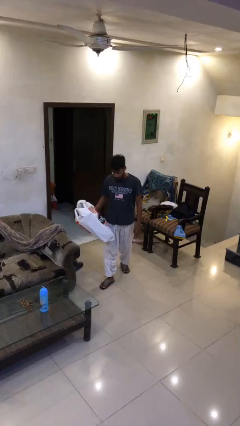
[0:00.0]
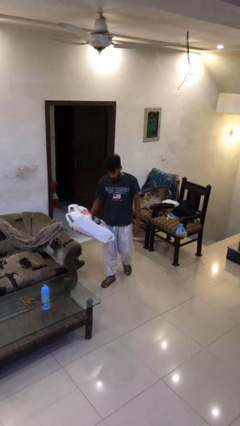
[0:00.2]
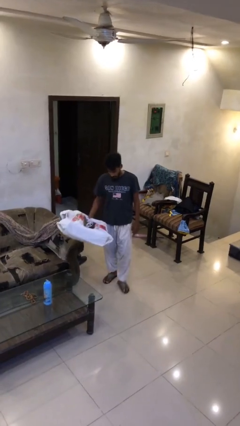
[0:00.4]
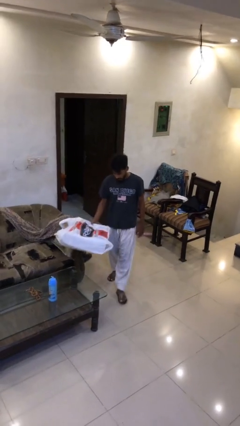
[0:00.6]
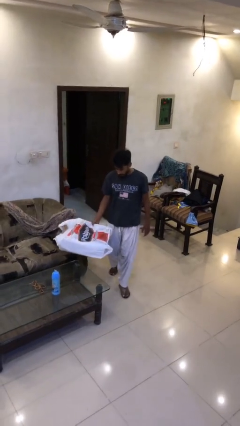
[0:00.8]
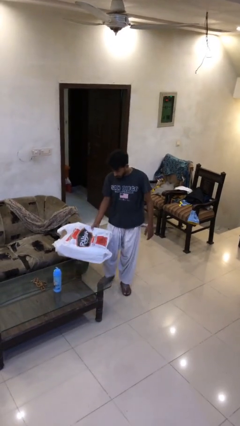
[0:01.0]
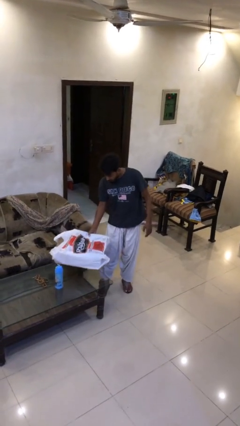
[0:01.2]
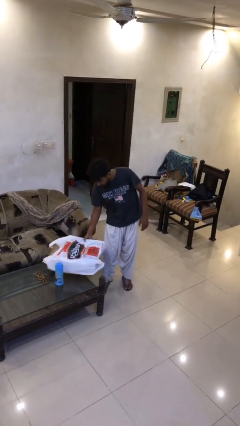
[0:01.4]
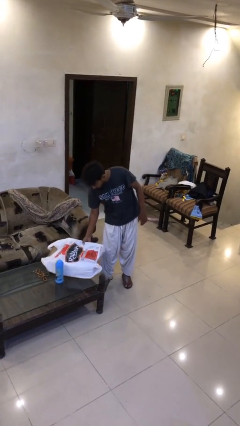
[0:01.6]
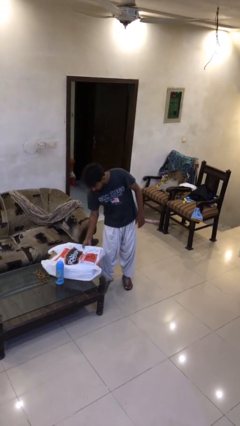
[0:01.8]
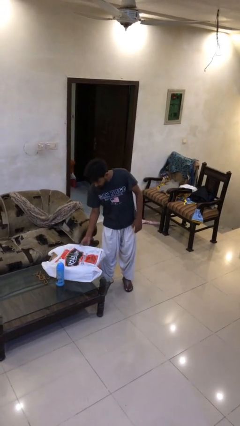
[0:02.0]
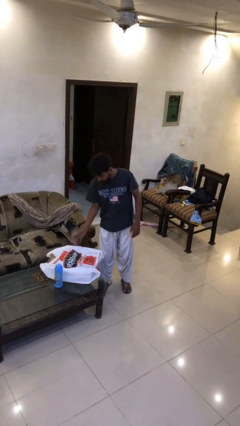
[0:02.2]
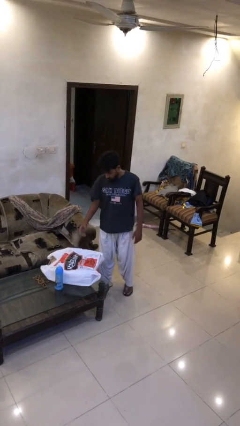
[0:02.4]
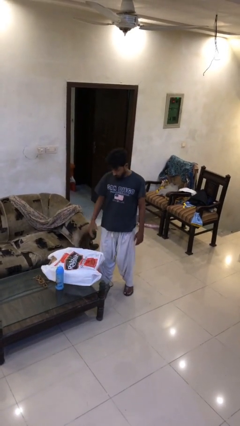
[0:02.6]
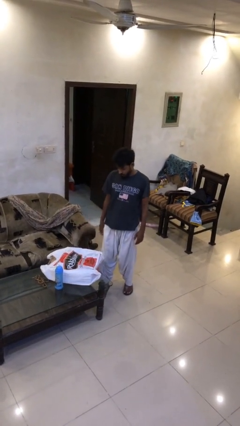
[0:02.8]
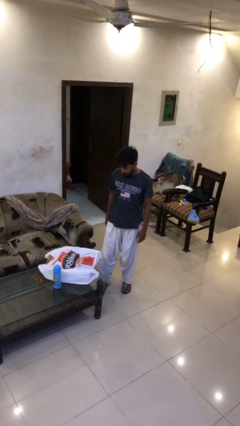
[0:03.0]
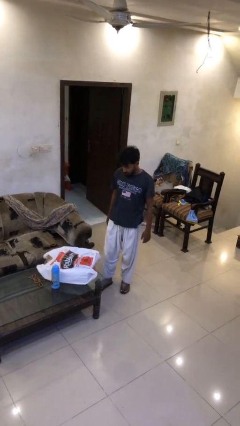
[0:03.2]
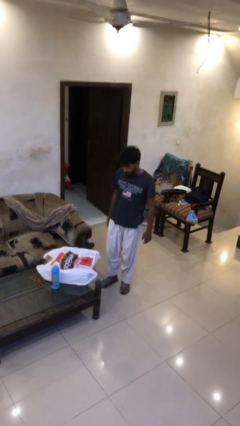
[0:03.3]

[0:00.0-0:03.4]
person puts down object on table

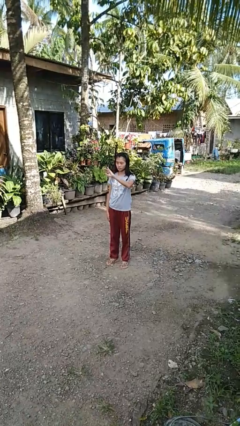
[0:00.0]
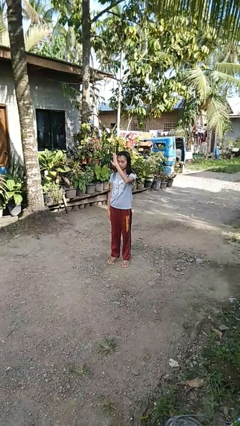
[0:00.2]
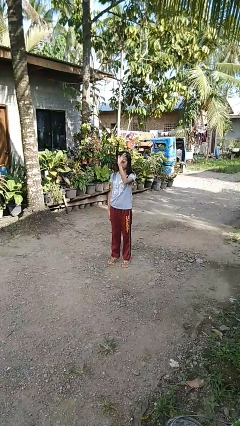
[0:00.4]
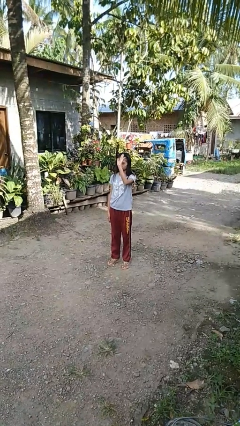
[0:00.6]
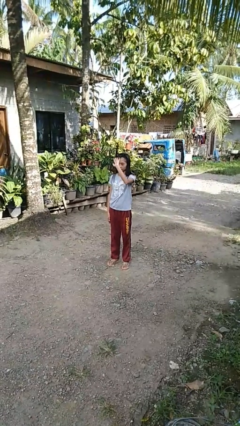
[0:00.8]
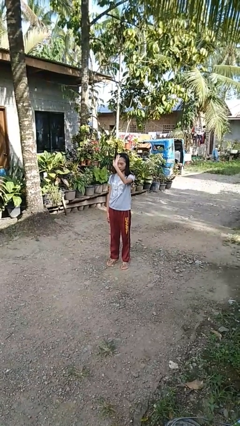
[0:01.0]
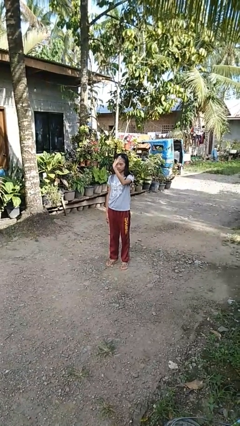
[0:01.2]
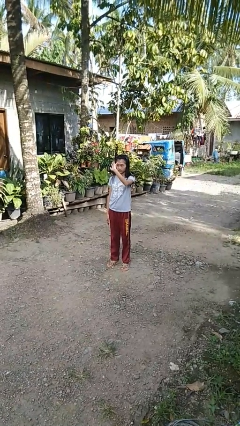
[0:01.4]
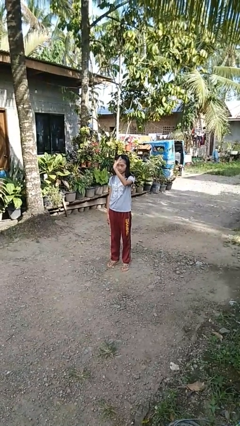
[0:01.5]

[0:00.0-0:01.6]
person waves at person

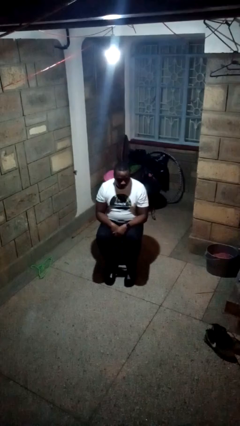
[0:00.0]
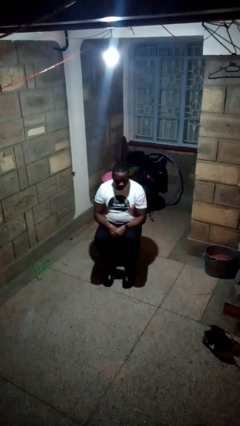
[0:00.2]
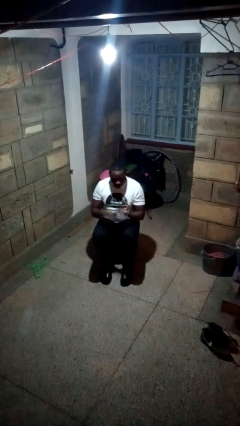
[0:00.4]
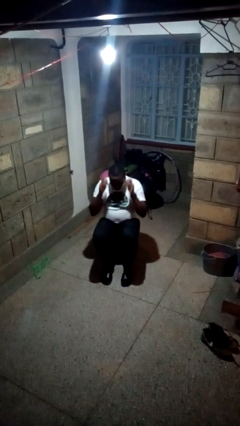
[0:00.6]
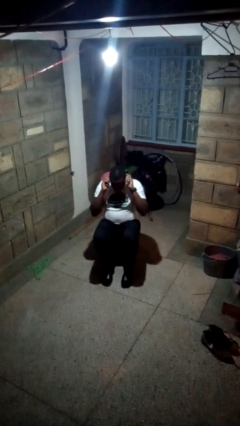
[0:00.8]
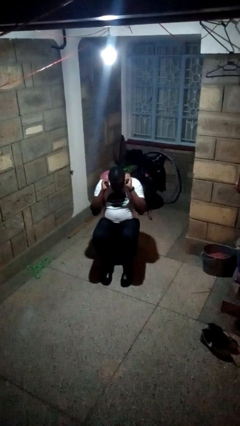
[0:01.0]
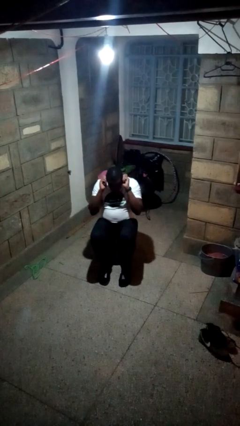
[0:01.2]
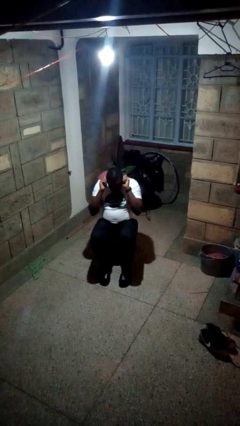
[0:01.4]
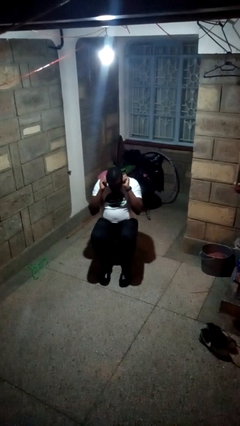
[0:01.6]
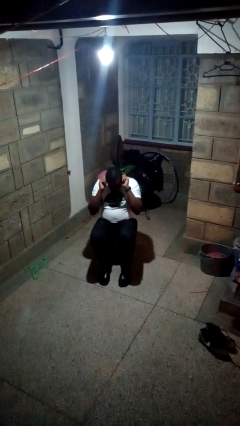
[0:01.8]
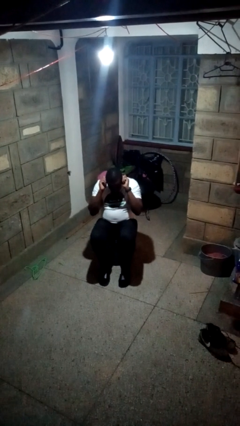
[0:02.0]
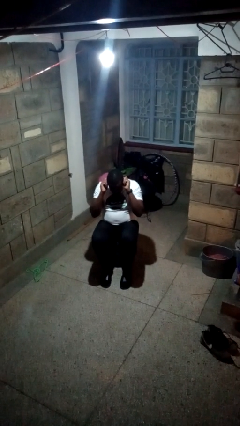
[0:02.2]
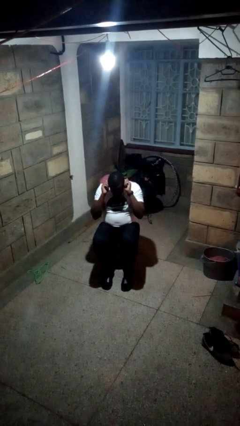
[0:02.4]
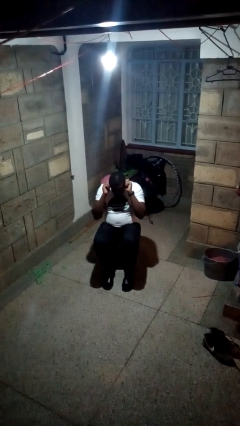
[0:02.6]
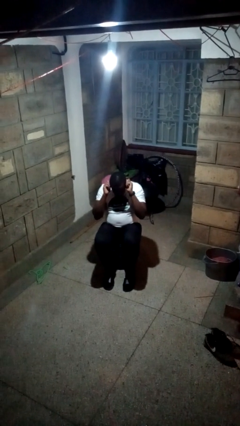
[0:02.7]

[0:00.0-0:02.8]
person touches earlobe

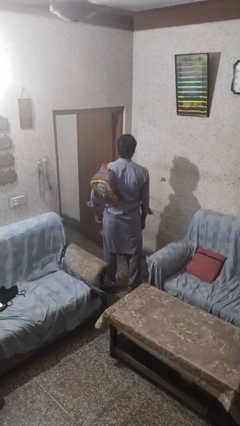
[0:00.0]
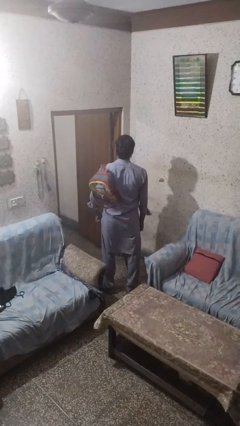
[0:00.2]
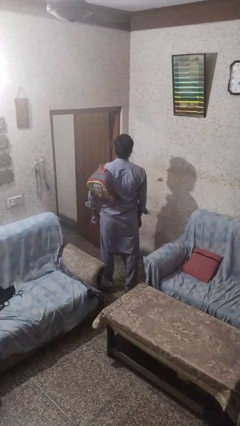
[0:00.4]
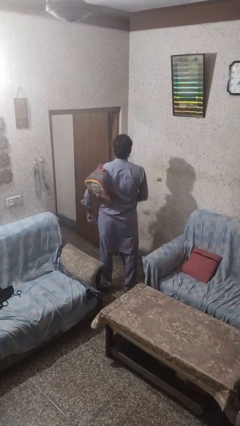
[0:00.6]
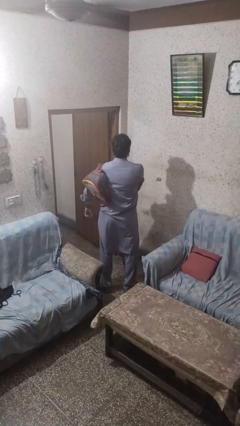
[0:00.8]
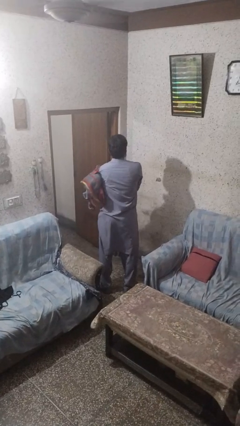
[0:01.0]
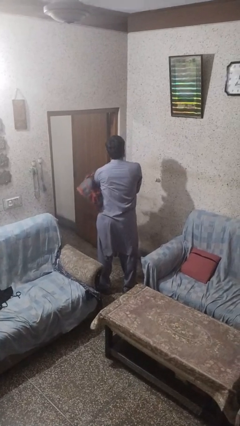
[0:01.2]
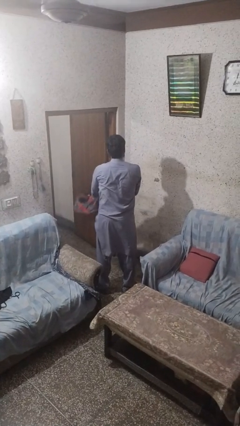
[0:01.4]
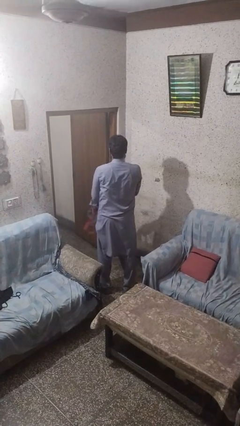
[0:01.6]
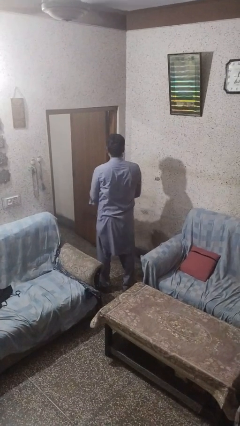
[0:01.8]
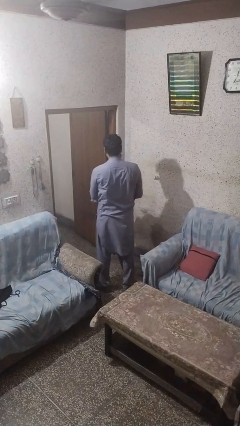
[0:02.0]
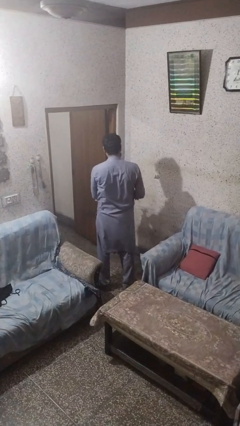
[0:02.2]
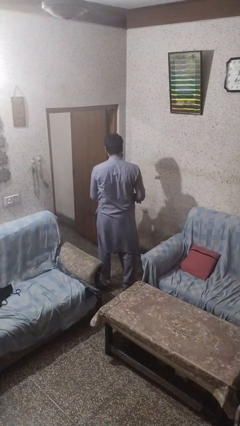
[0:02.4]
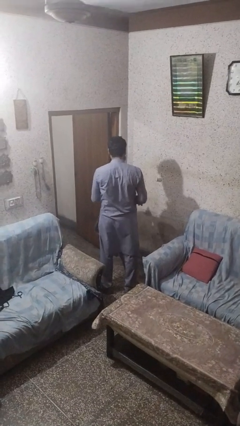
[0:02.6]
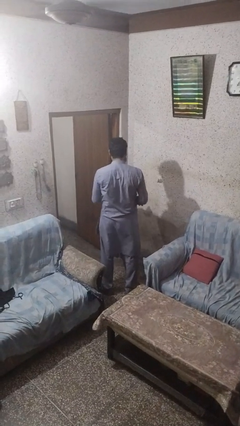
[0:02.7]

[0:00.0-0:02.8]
person takes off backpack

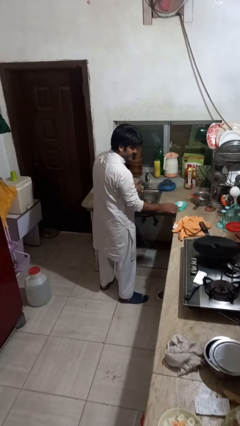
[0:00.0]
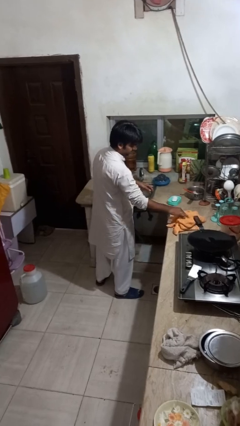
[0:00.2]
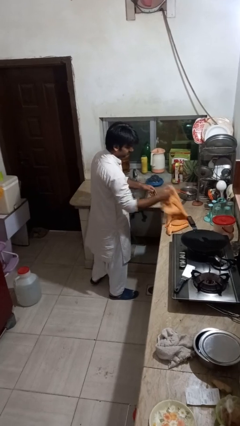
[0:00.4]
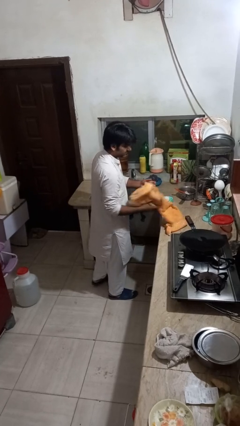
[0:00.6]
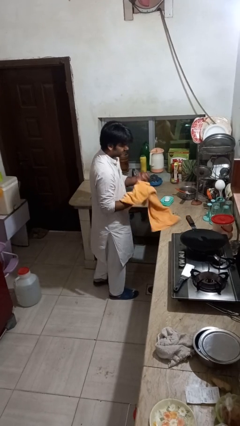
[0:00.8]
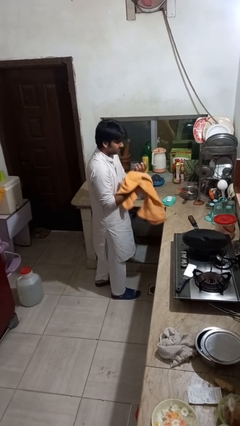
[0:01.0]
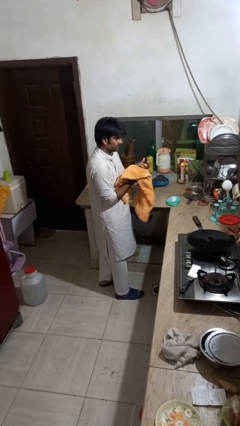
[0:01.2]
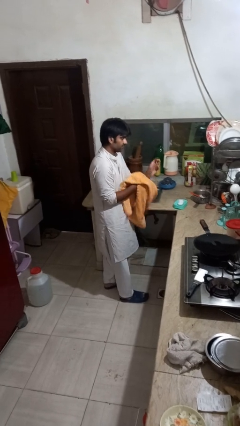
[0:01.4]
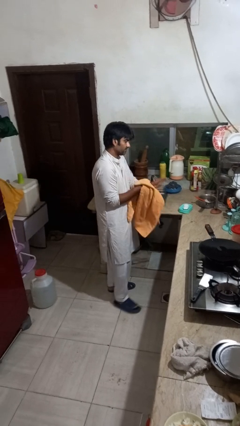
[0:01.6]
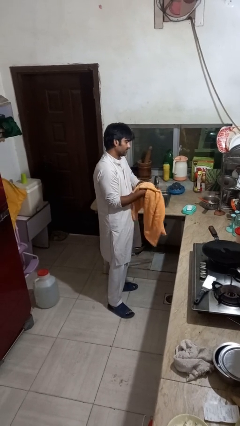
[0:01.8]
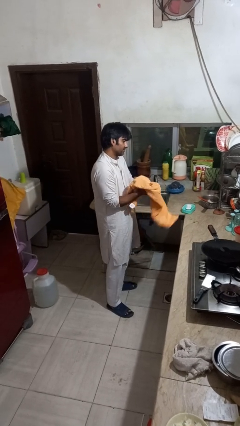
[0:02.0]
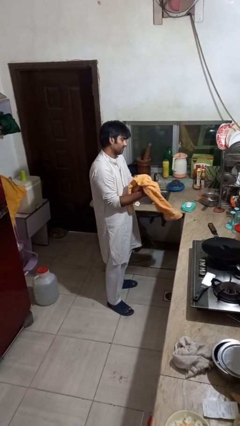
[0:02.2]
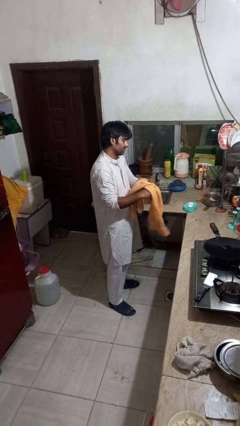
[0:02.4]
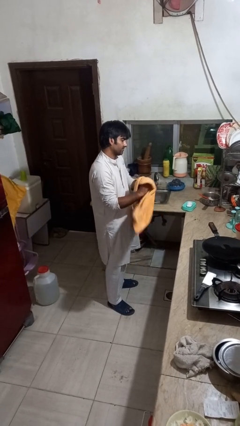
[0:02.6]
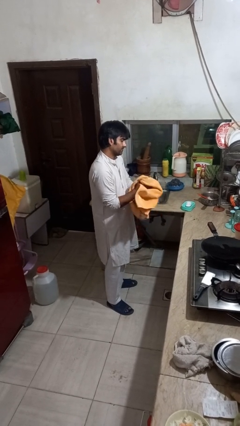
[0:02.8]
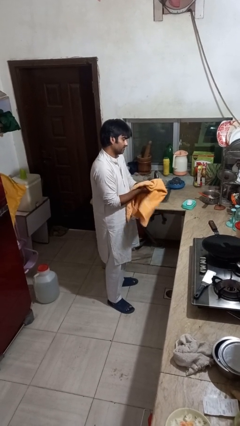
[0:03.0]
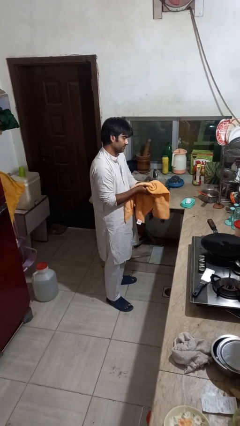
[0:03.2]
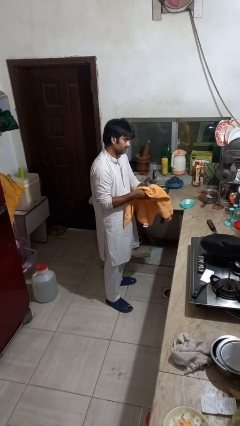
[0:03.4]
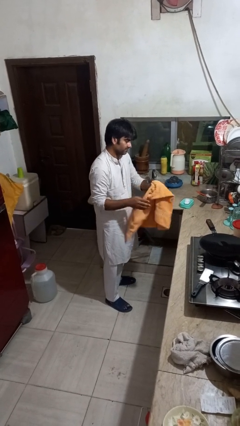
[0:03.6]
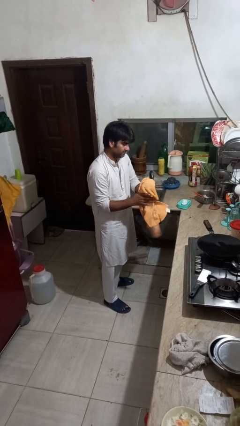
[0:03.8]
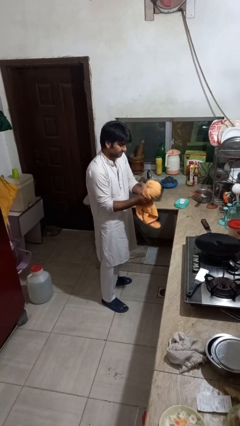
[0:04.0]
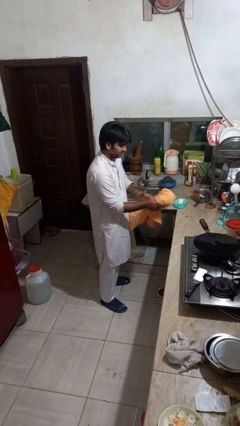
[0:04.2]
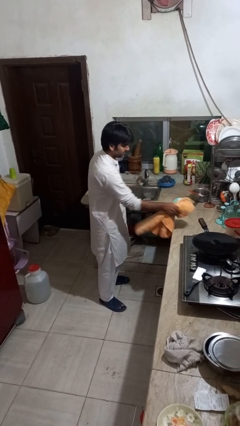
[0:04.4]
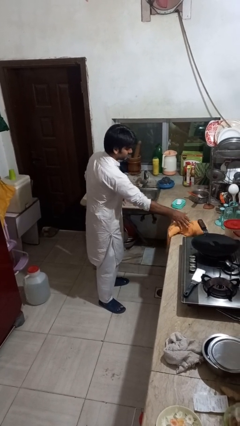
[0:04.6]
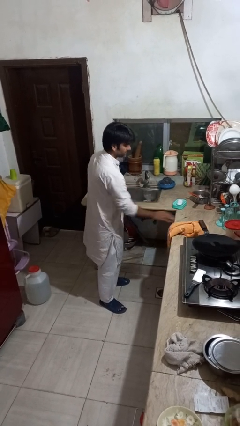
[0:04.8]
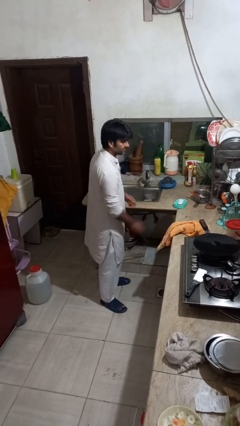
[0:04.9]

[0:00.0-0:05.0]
person dries hands with towel

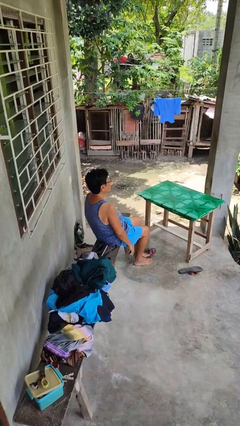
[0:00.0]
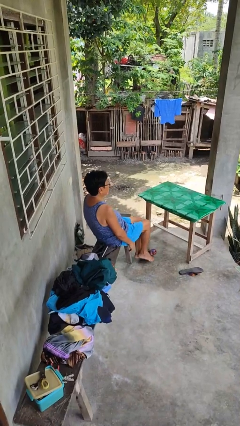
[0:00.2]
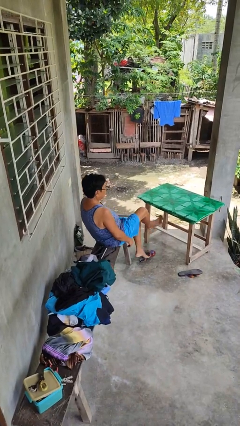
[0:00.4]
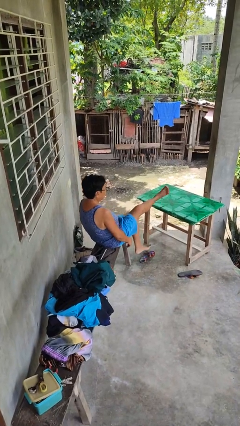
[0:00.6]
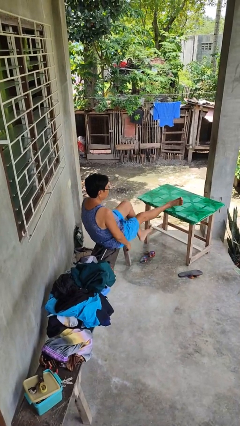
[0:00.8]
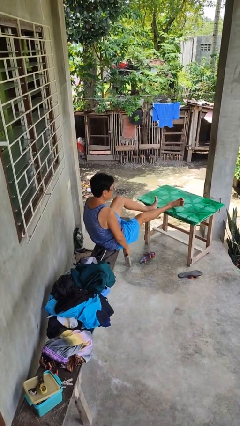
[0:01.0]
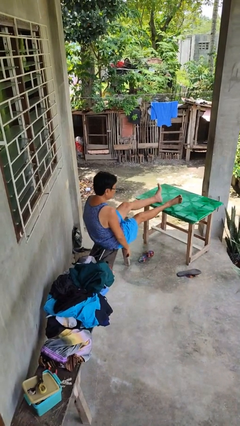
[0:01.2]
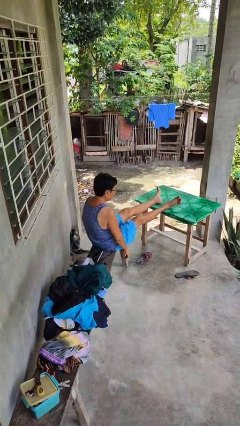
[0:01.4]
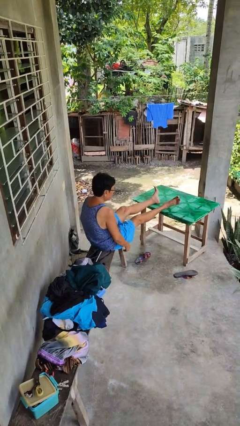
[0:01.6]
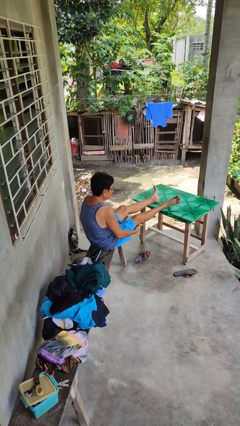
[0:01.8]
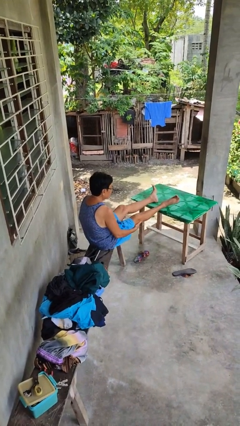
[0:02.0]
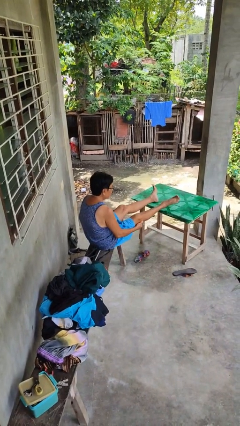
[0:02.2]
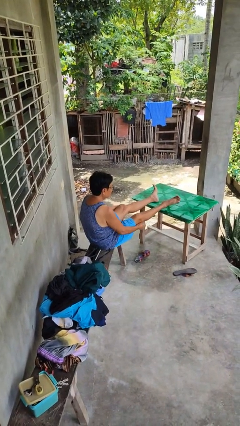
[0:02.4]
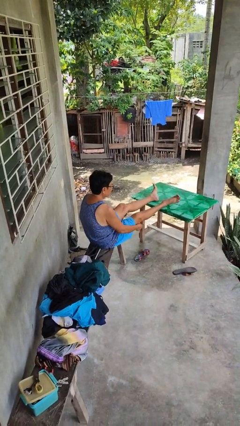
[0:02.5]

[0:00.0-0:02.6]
person puts feet up
